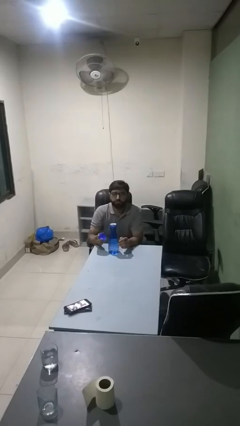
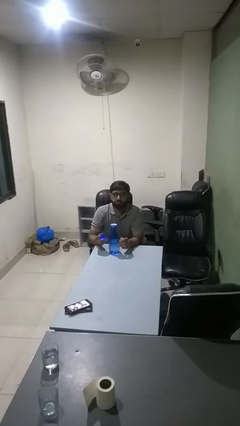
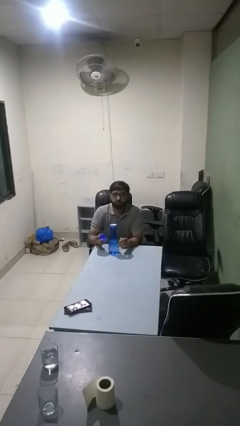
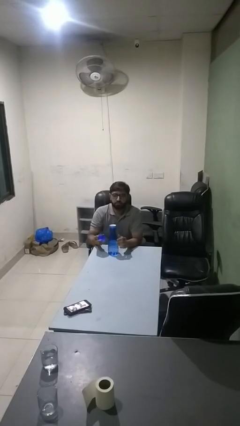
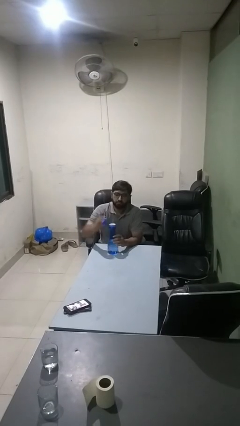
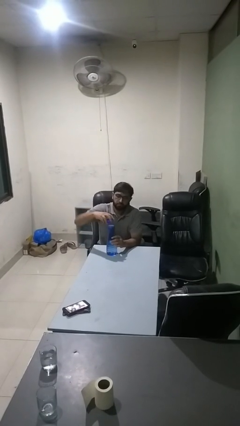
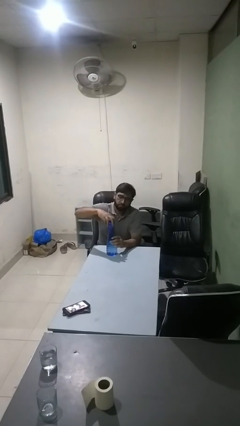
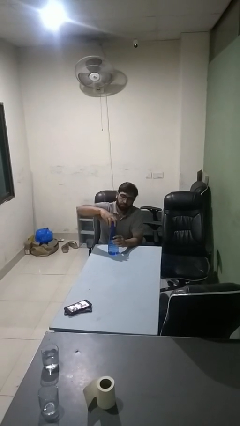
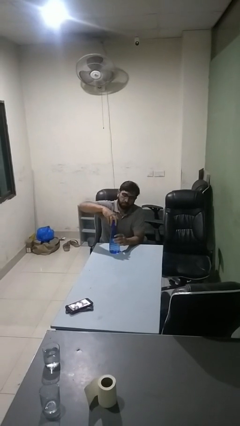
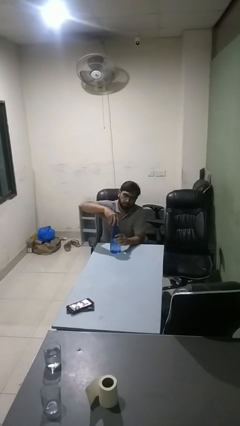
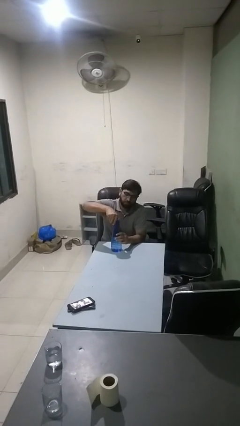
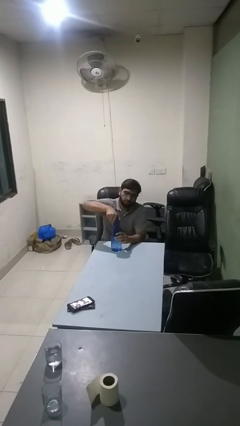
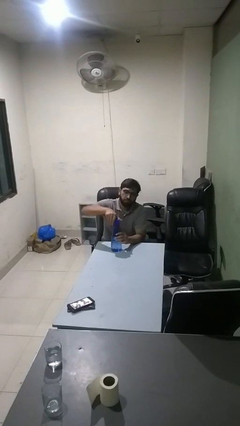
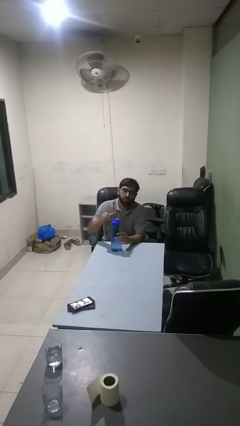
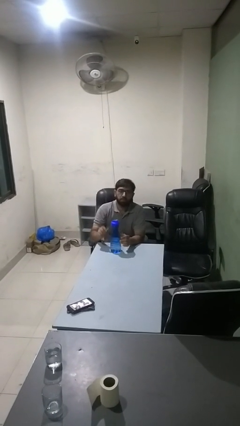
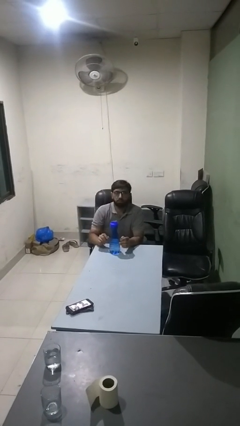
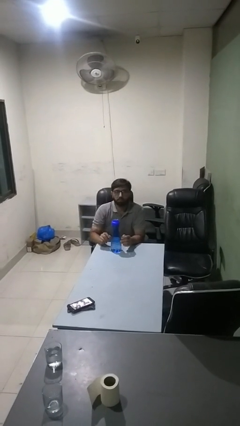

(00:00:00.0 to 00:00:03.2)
person screws lid to bottle

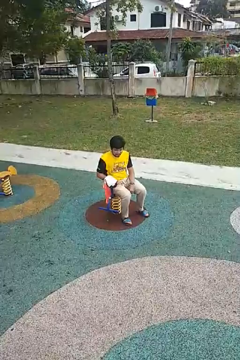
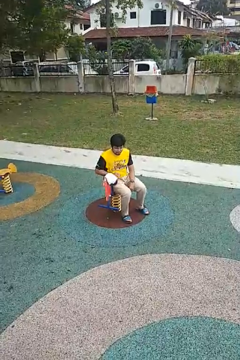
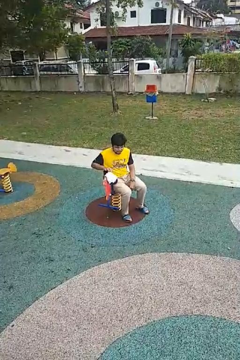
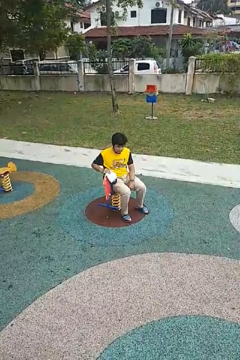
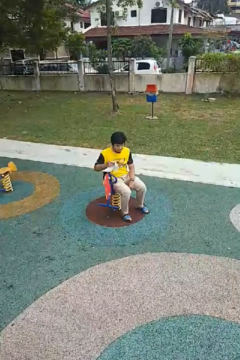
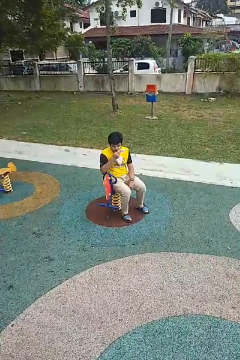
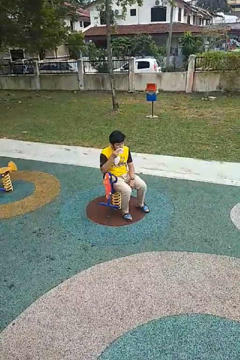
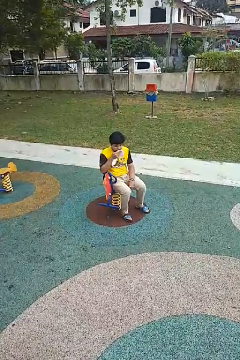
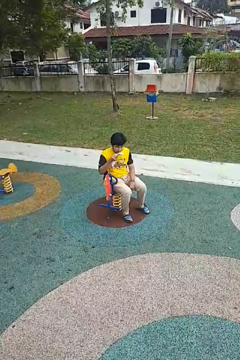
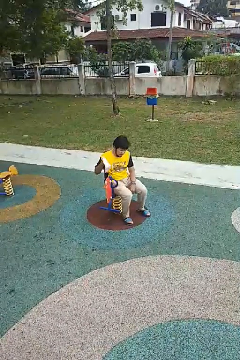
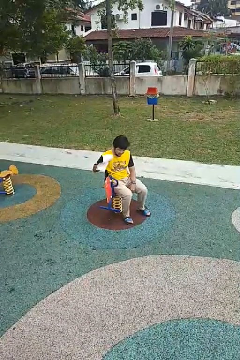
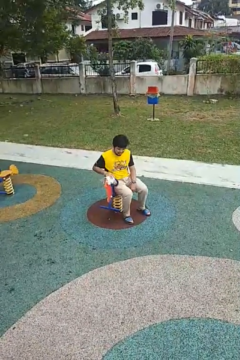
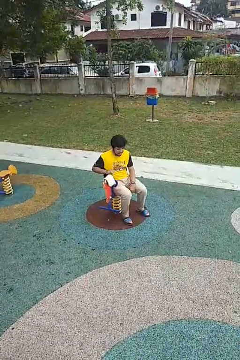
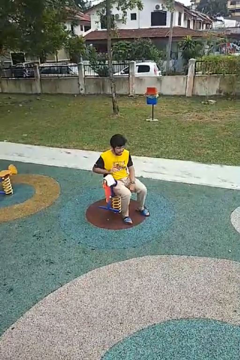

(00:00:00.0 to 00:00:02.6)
person wipes mouth with napkin

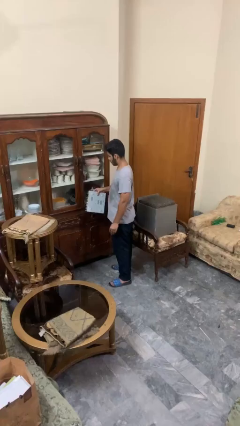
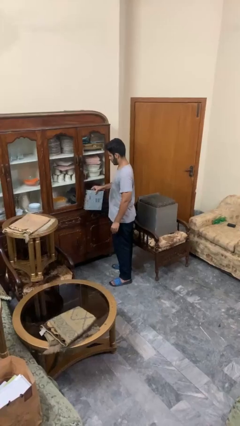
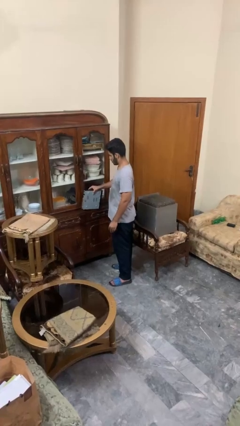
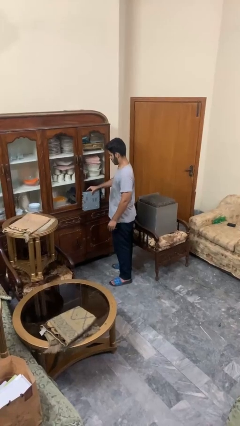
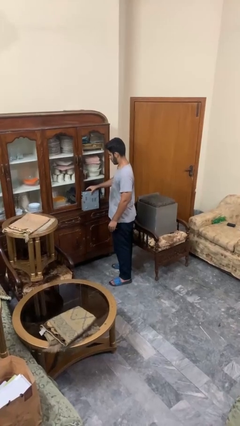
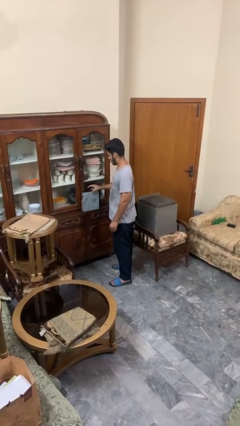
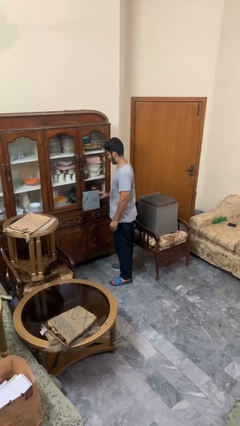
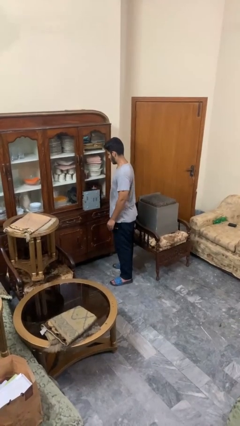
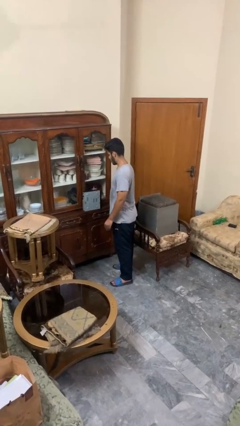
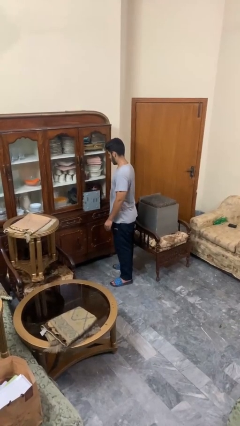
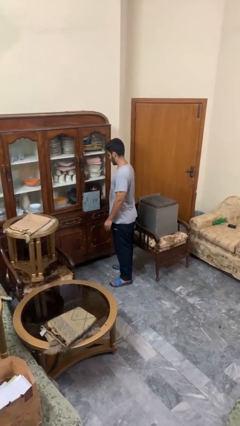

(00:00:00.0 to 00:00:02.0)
person puts down object on countertop

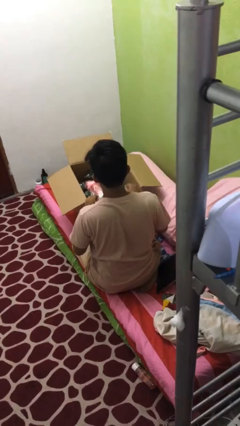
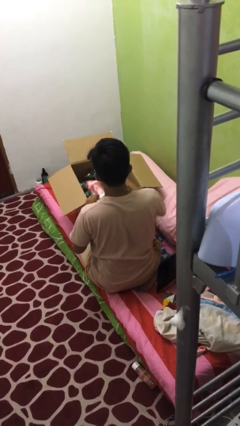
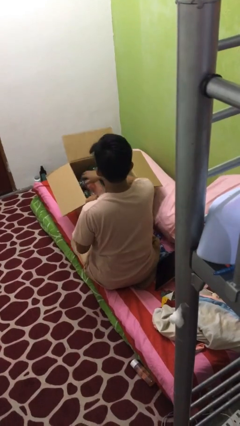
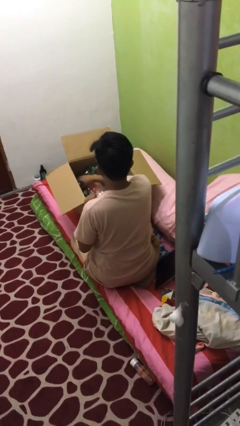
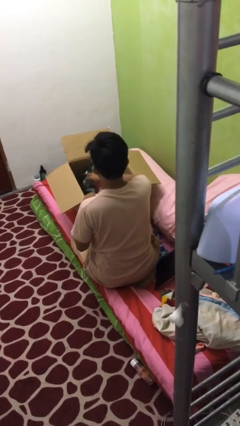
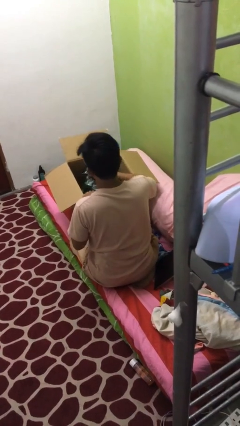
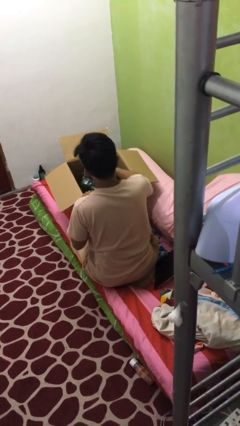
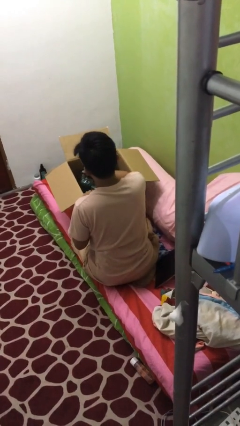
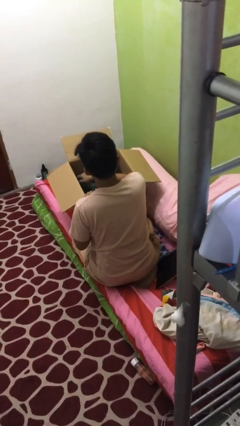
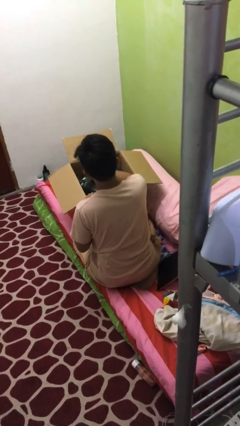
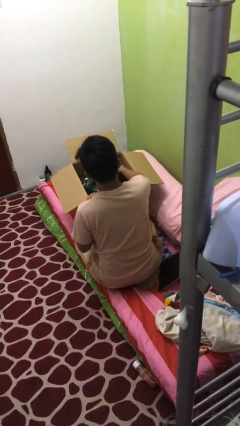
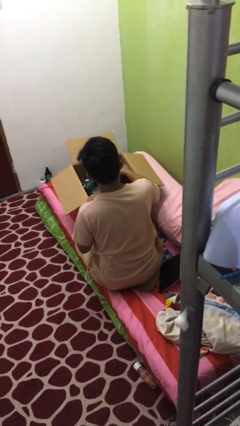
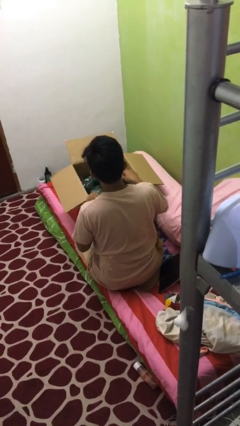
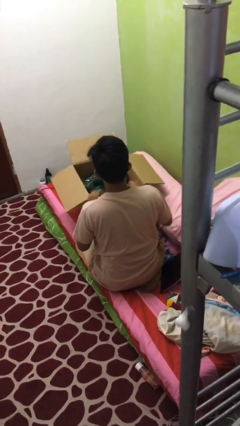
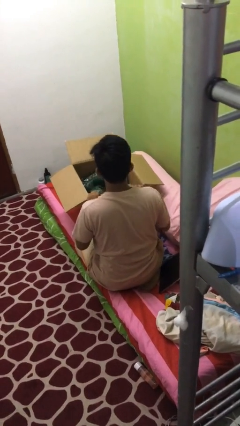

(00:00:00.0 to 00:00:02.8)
person searches in box

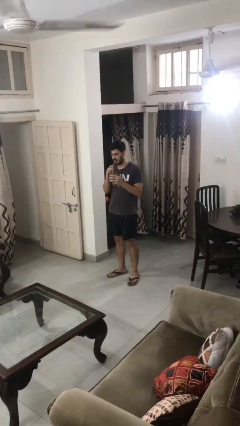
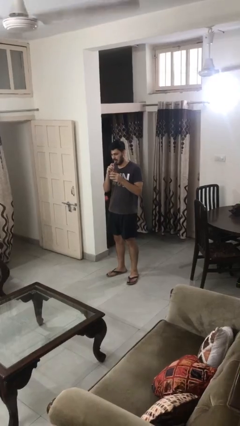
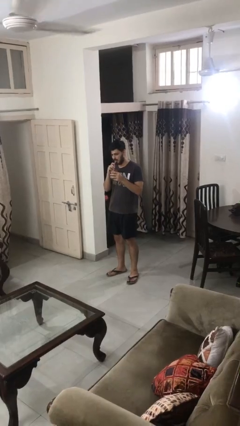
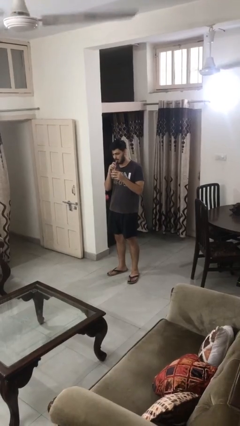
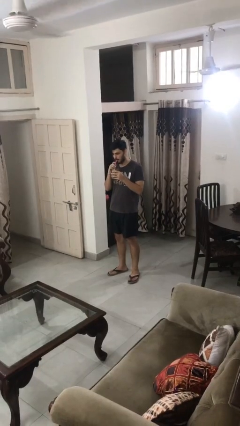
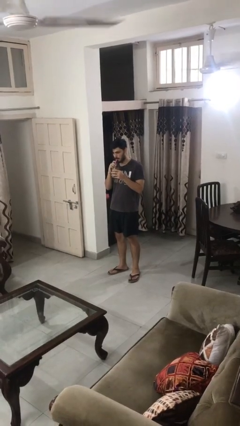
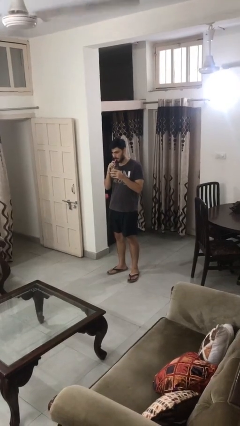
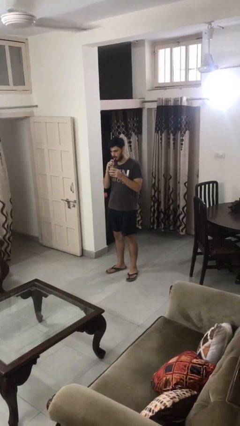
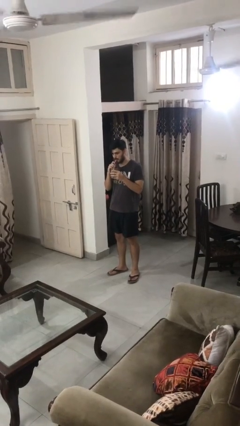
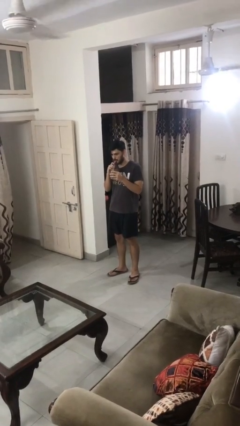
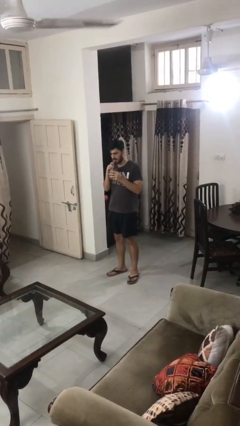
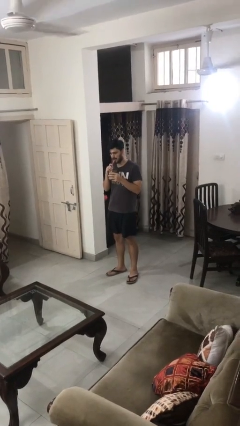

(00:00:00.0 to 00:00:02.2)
person drinks from straw

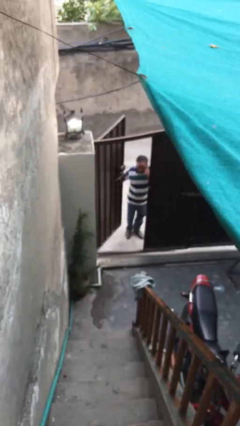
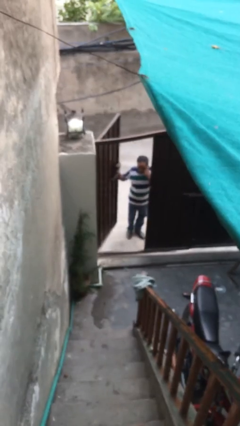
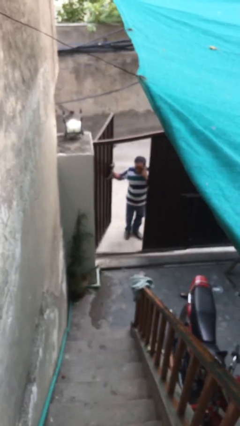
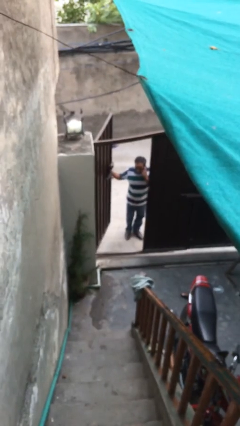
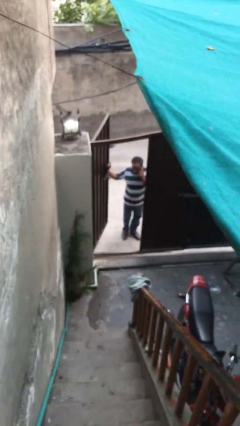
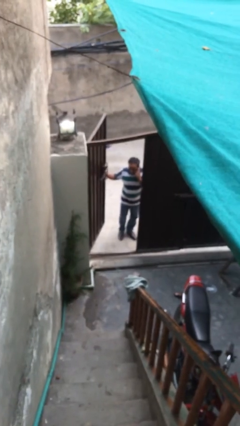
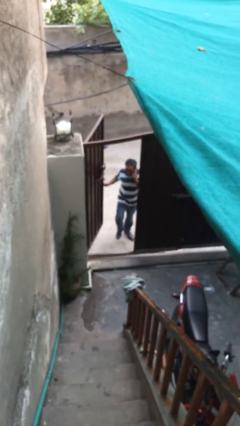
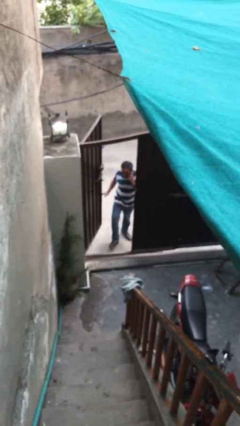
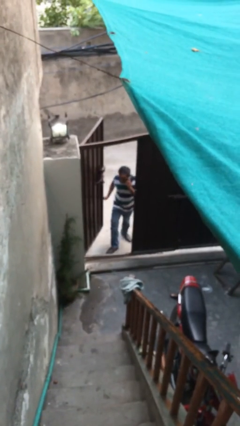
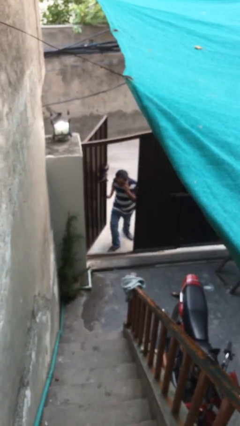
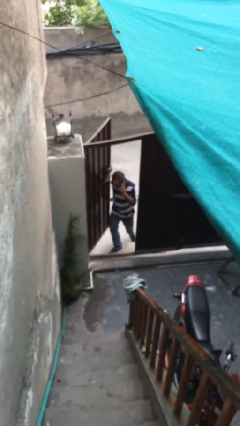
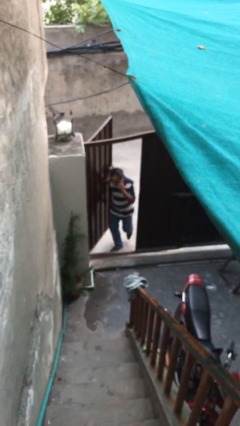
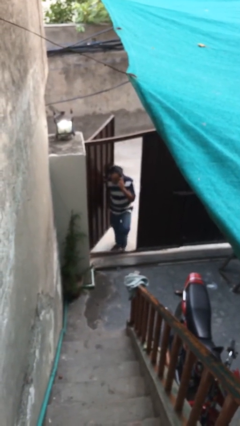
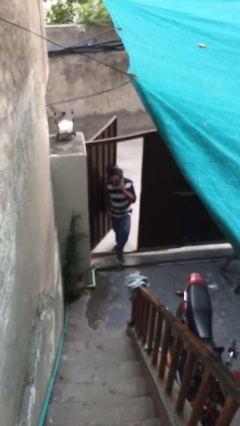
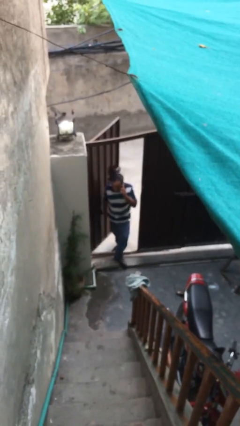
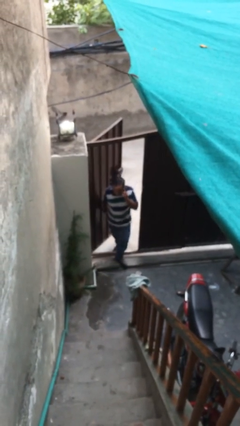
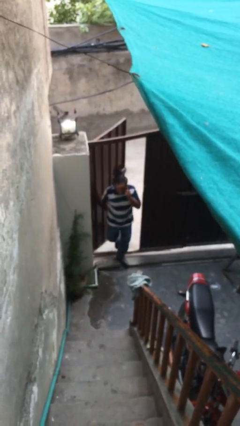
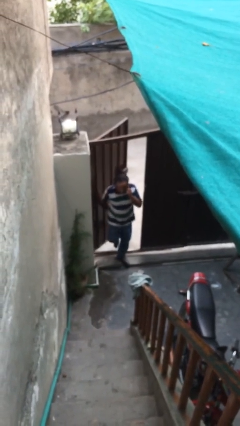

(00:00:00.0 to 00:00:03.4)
person enters scene through structure

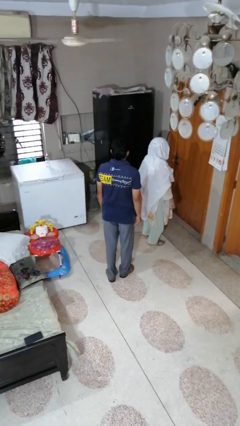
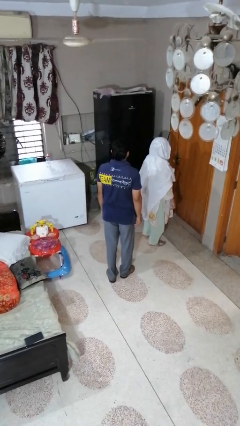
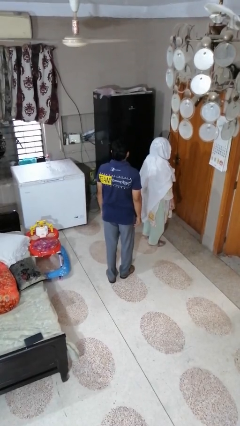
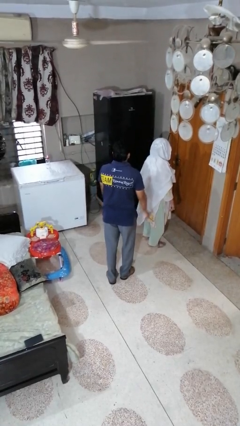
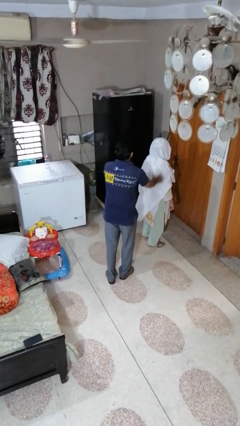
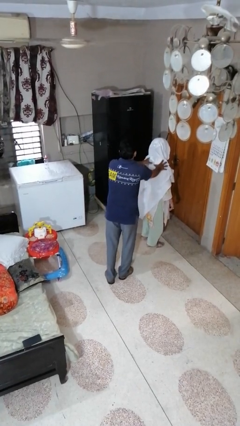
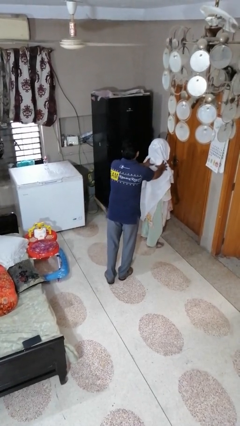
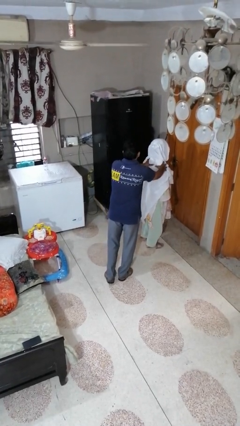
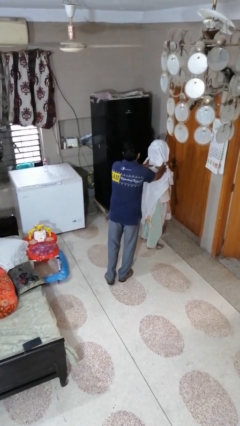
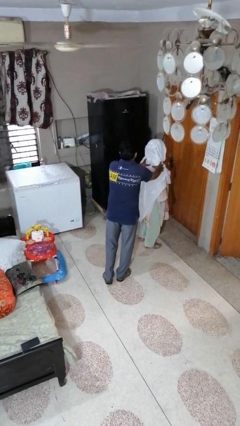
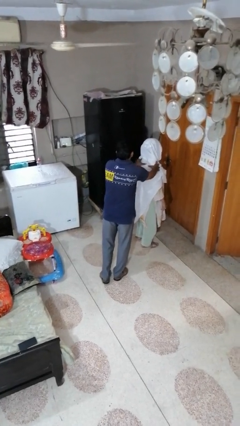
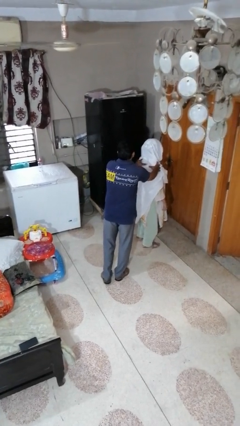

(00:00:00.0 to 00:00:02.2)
person grabs person by shoulder
